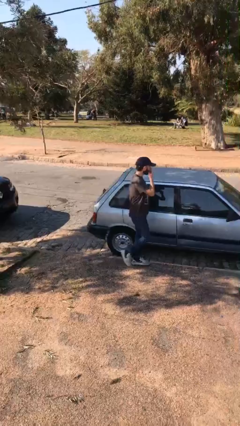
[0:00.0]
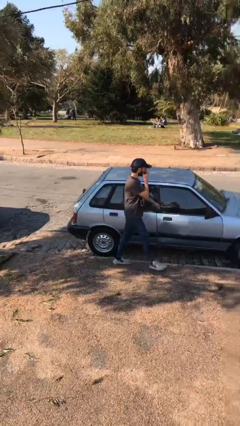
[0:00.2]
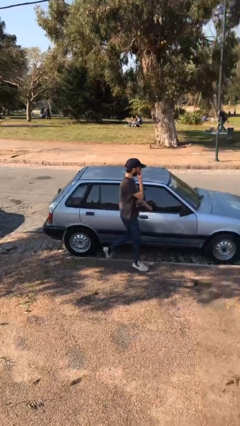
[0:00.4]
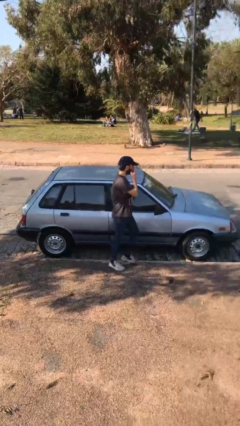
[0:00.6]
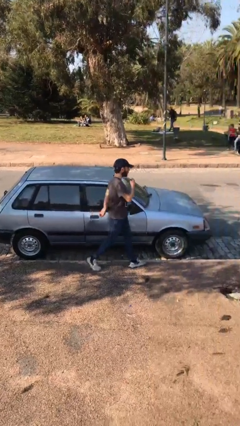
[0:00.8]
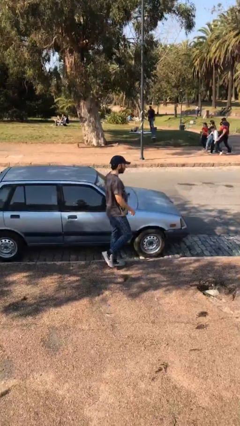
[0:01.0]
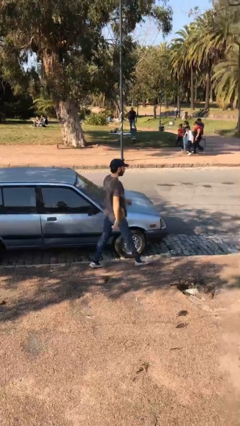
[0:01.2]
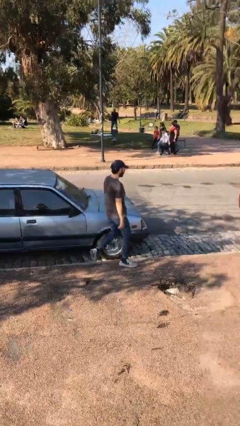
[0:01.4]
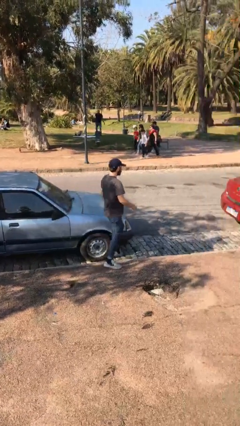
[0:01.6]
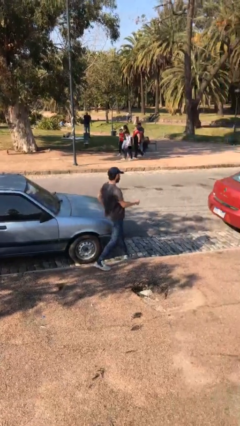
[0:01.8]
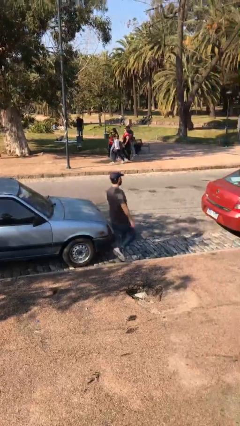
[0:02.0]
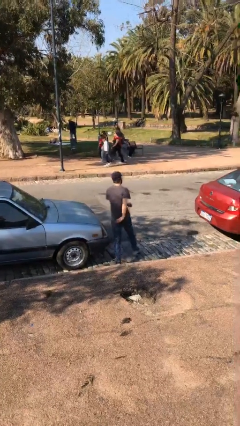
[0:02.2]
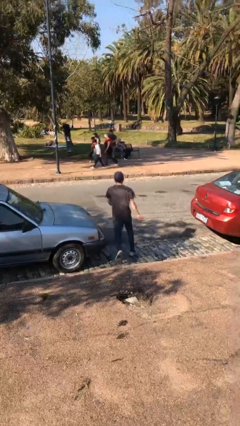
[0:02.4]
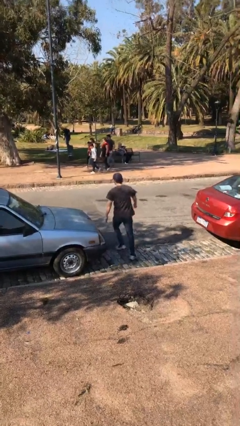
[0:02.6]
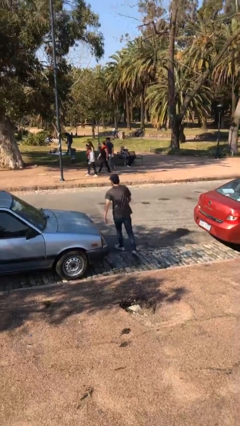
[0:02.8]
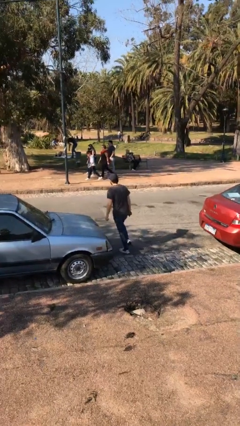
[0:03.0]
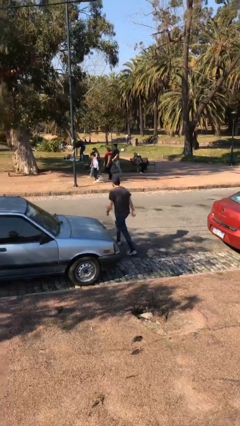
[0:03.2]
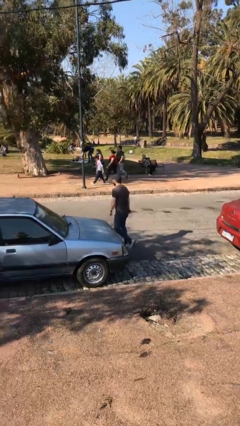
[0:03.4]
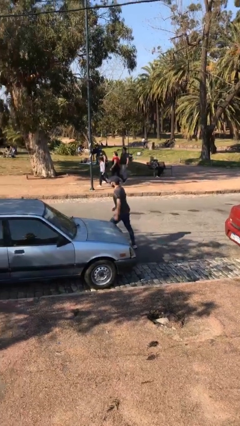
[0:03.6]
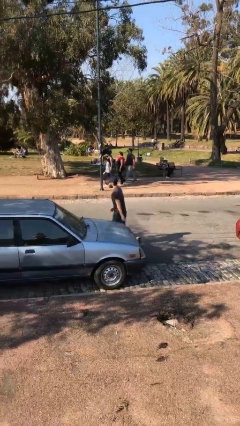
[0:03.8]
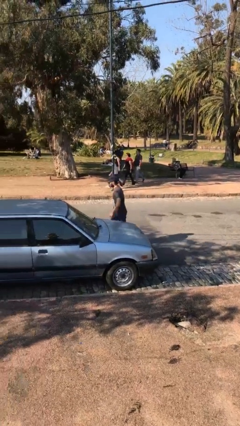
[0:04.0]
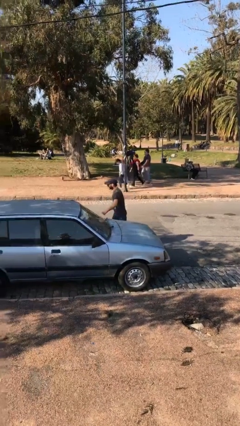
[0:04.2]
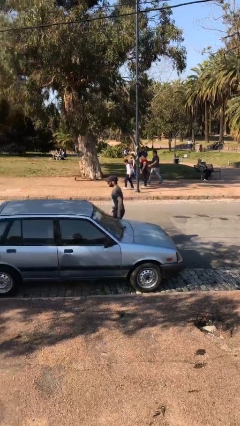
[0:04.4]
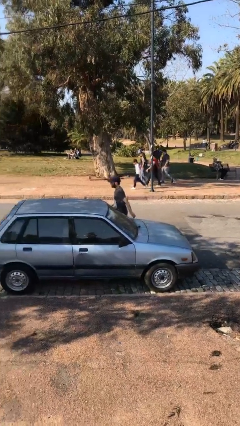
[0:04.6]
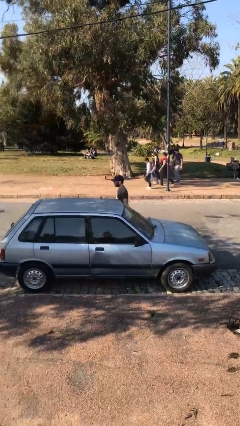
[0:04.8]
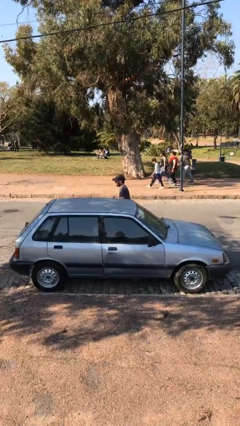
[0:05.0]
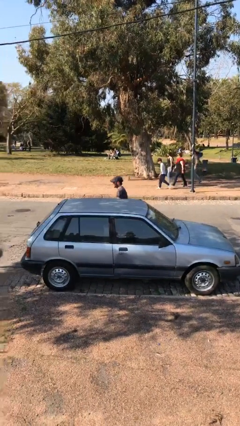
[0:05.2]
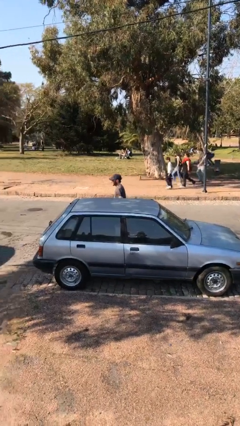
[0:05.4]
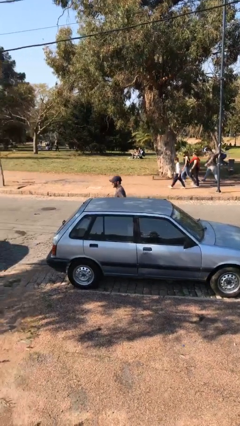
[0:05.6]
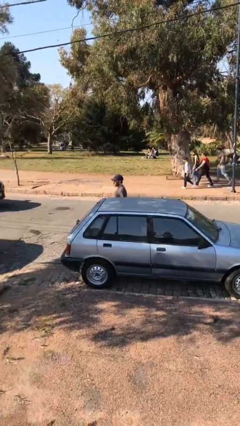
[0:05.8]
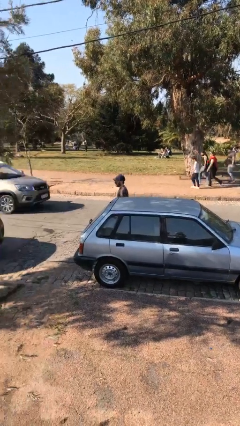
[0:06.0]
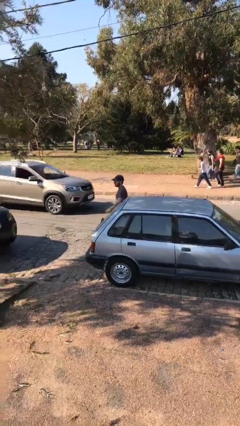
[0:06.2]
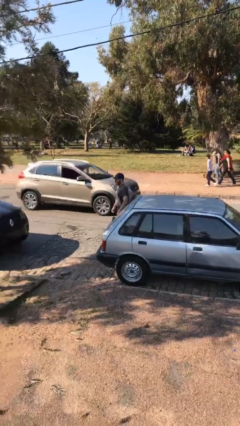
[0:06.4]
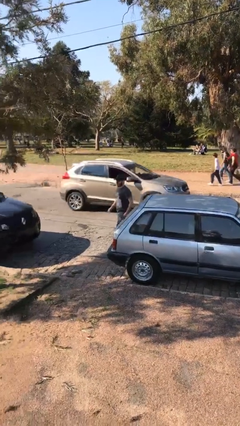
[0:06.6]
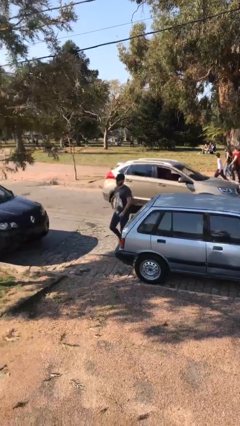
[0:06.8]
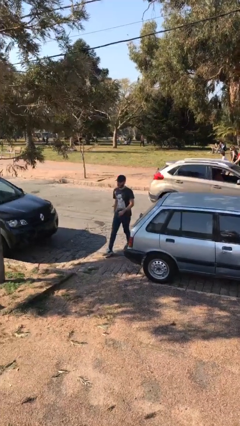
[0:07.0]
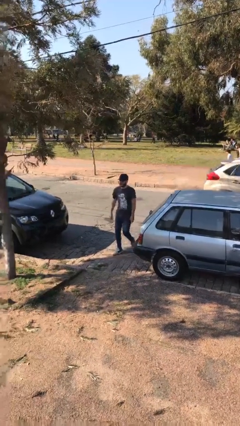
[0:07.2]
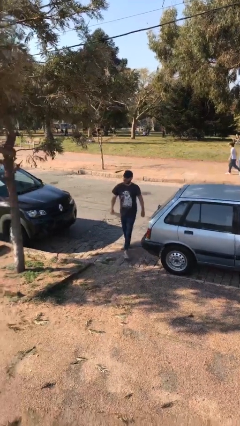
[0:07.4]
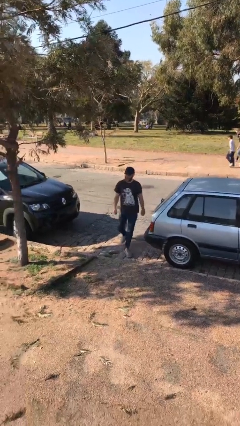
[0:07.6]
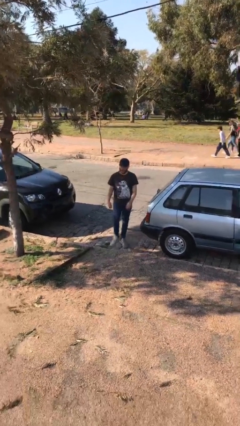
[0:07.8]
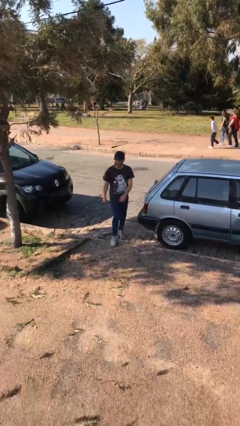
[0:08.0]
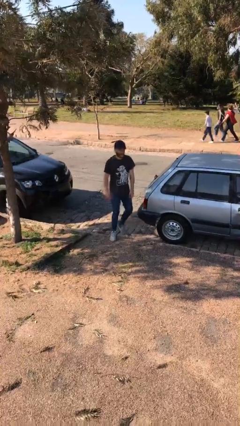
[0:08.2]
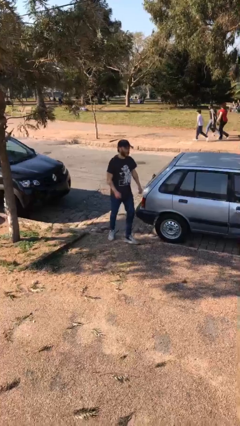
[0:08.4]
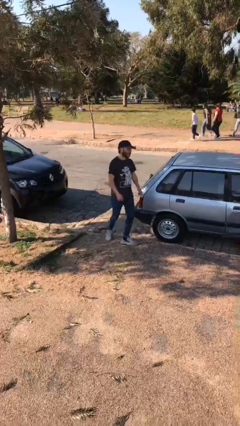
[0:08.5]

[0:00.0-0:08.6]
person walks around car

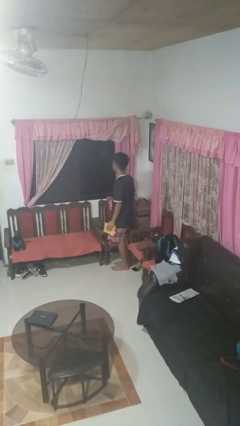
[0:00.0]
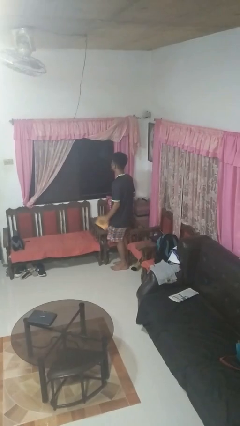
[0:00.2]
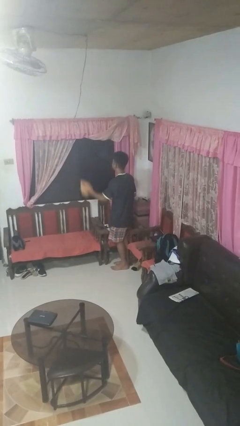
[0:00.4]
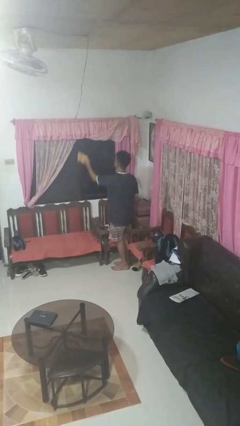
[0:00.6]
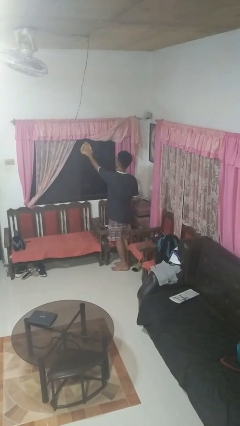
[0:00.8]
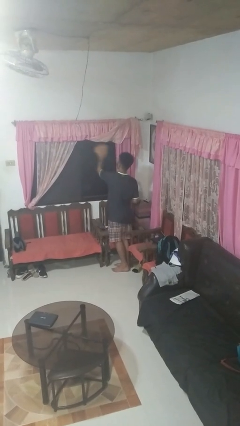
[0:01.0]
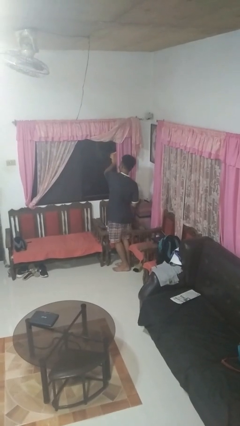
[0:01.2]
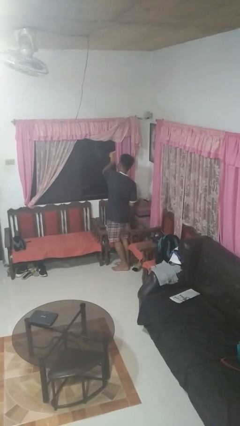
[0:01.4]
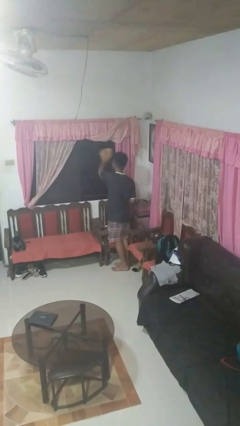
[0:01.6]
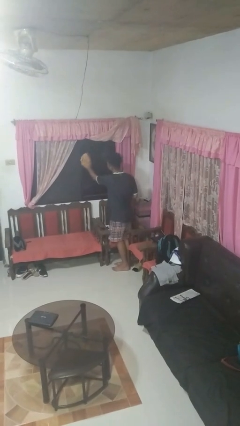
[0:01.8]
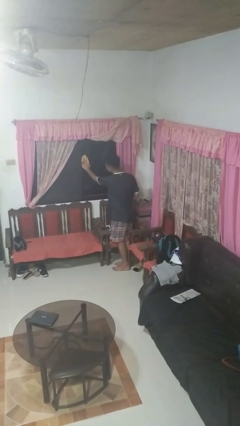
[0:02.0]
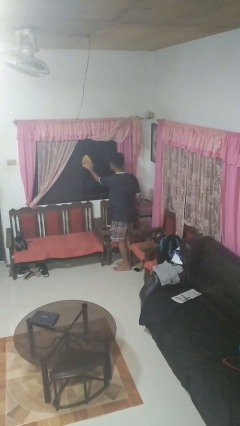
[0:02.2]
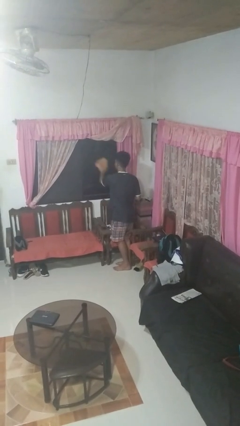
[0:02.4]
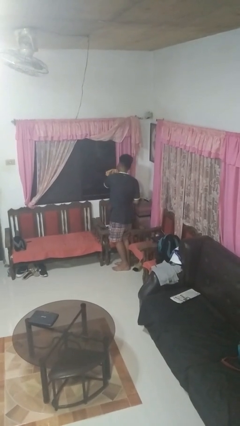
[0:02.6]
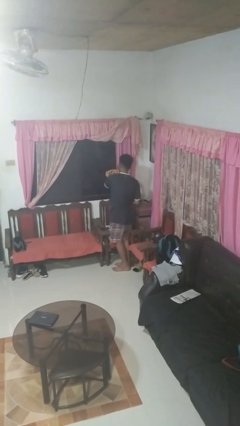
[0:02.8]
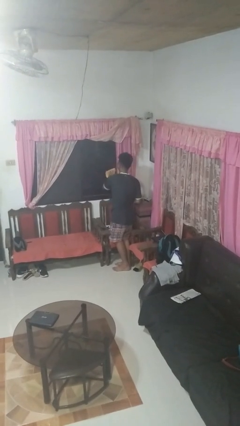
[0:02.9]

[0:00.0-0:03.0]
person washes window

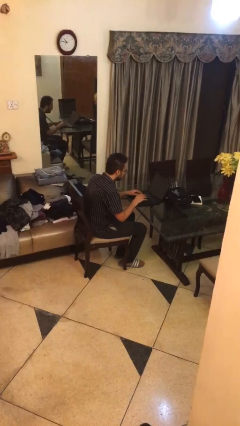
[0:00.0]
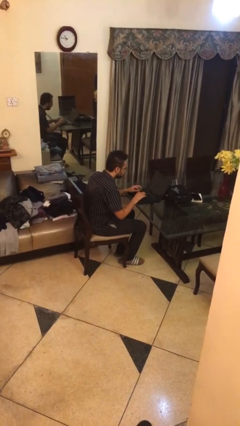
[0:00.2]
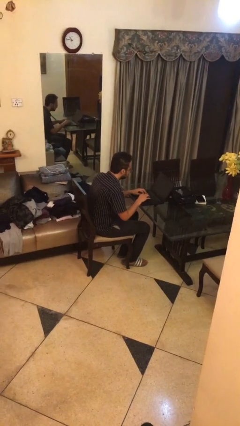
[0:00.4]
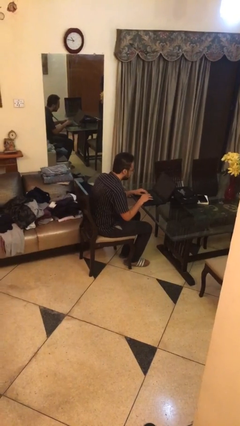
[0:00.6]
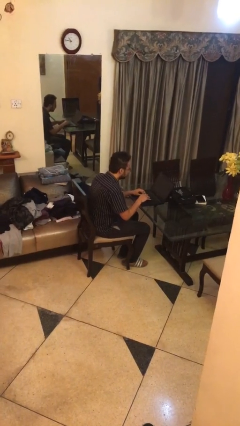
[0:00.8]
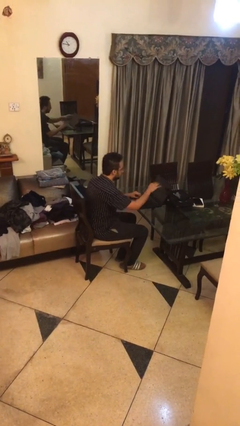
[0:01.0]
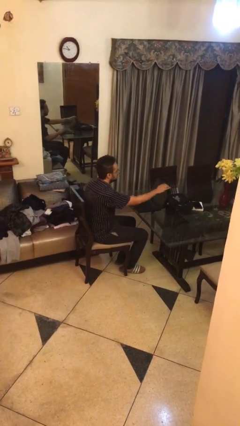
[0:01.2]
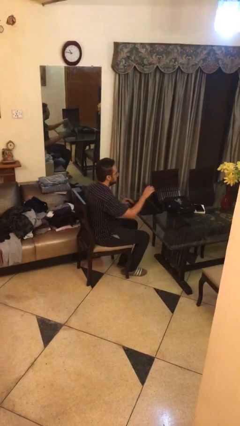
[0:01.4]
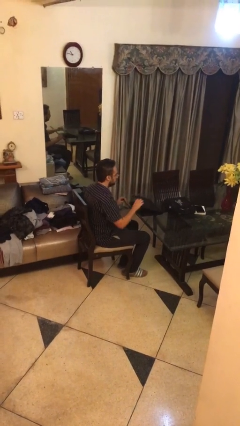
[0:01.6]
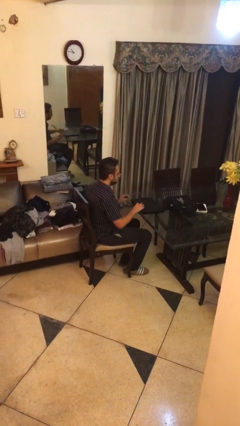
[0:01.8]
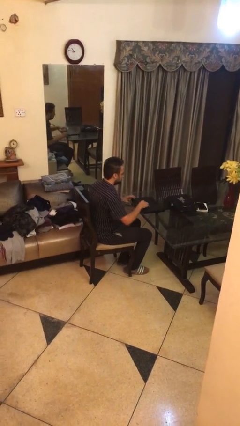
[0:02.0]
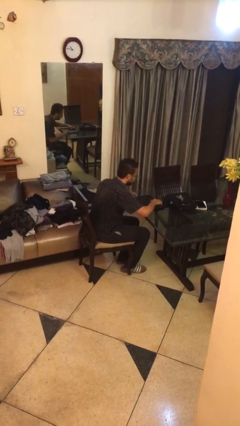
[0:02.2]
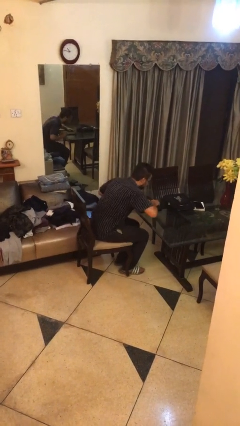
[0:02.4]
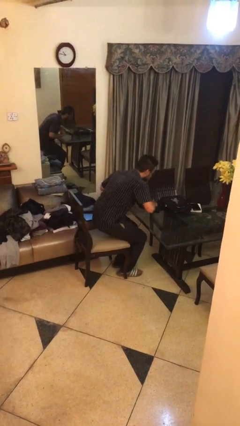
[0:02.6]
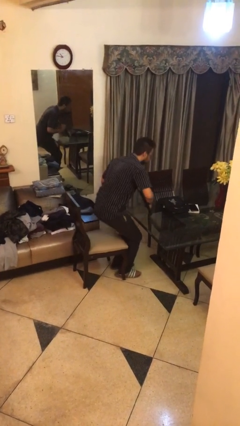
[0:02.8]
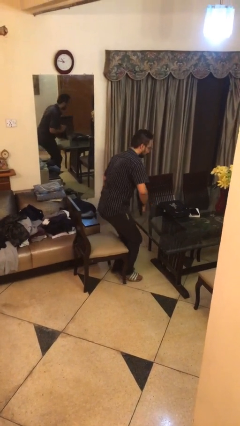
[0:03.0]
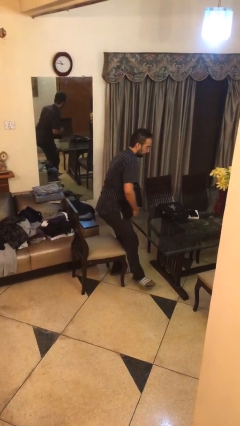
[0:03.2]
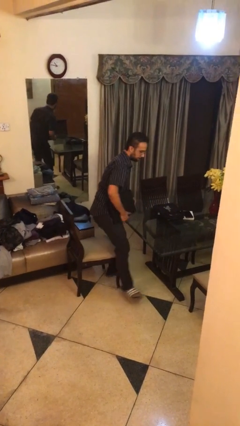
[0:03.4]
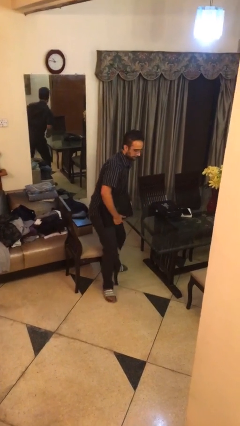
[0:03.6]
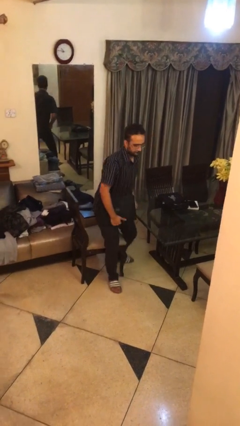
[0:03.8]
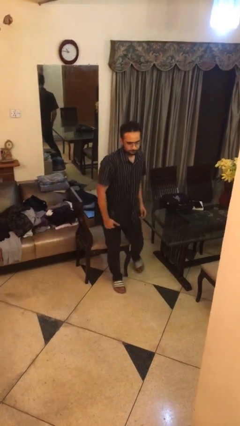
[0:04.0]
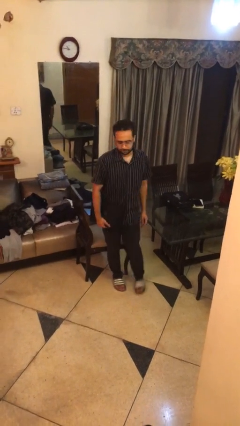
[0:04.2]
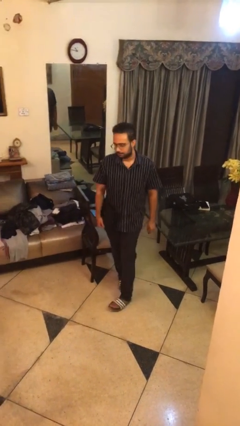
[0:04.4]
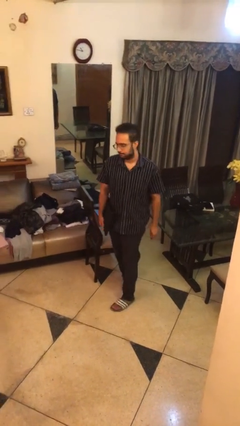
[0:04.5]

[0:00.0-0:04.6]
person stands up

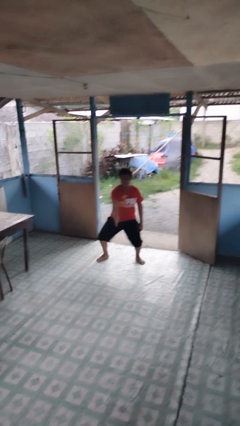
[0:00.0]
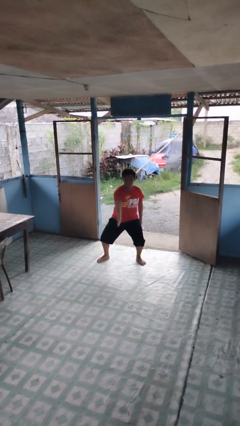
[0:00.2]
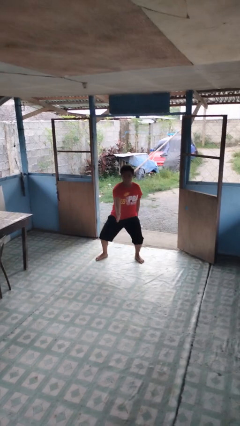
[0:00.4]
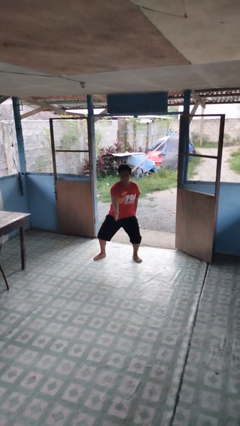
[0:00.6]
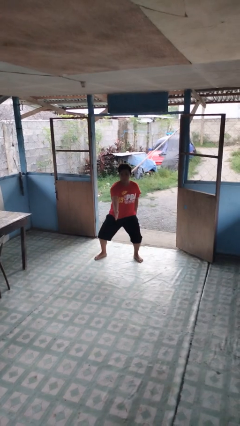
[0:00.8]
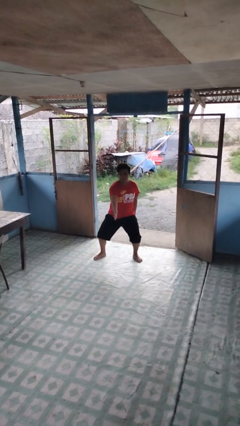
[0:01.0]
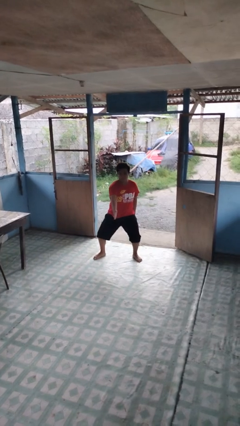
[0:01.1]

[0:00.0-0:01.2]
person karate chop

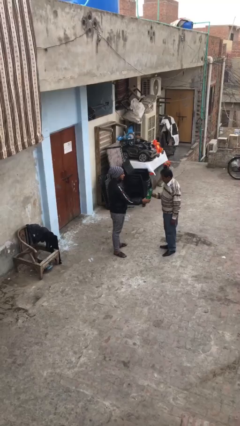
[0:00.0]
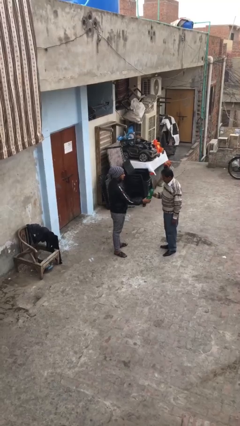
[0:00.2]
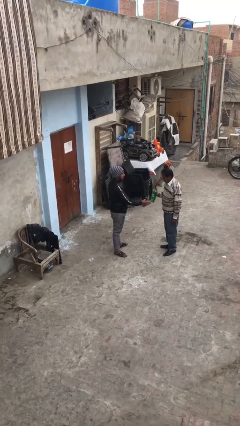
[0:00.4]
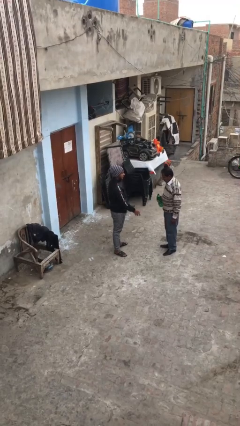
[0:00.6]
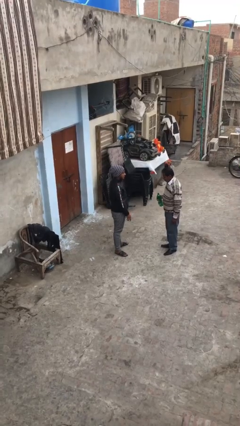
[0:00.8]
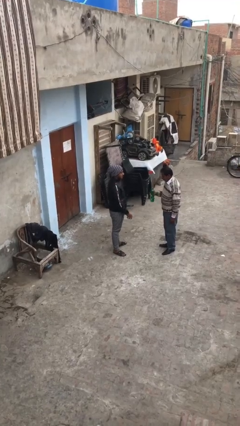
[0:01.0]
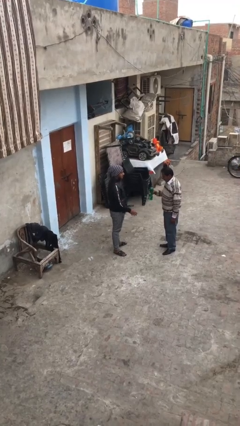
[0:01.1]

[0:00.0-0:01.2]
person transfers object to person
